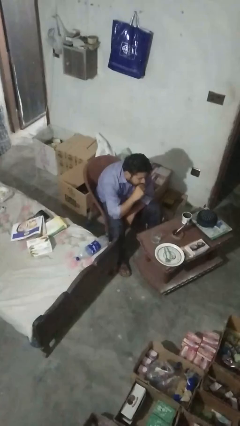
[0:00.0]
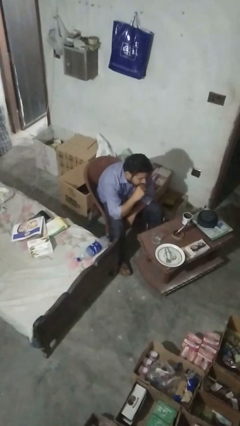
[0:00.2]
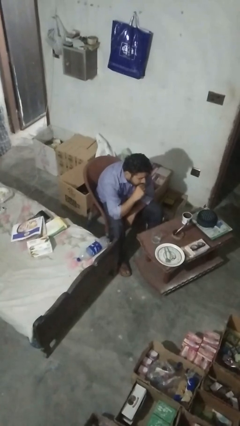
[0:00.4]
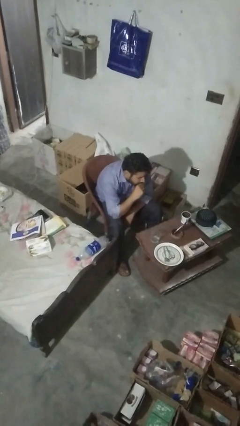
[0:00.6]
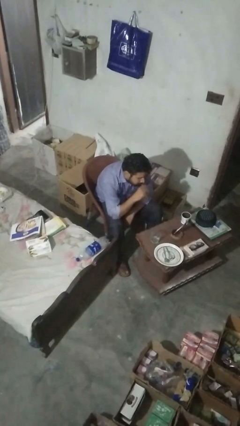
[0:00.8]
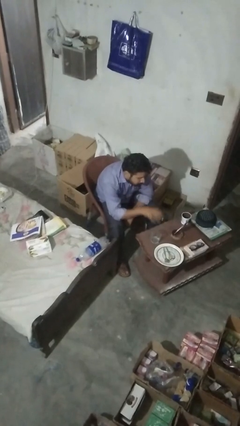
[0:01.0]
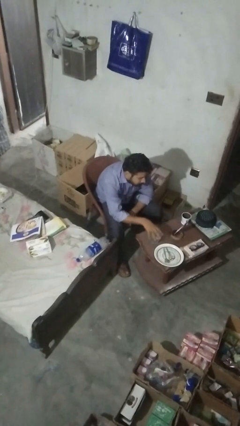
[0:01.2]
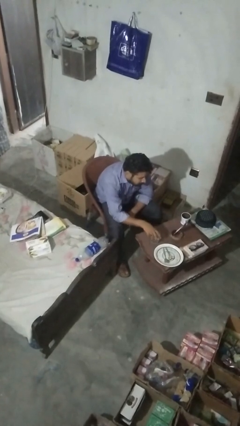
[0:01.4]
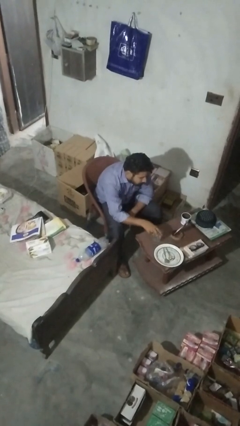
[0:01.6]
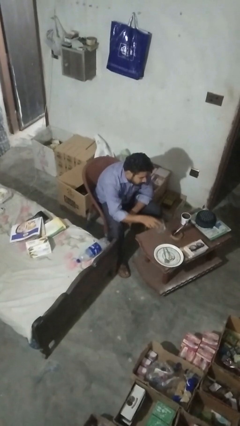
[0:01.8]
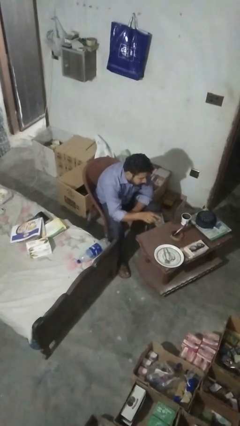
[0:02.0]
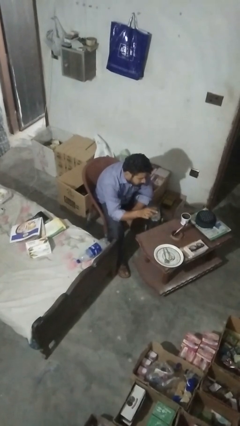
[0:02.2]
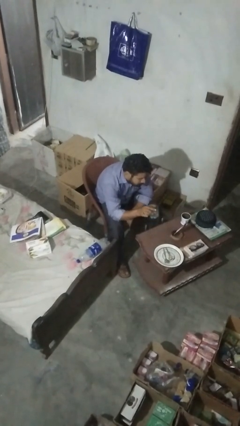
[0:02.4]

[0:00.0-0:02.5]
person picks up object from table

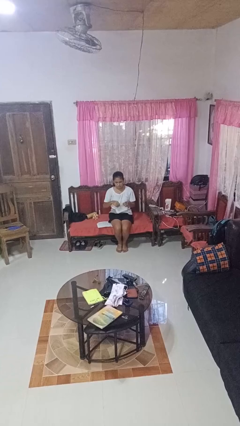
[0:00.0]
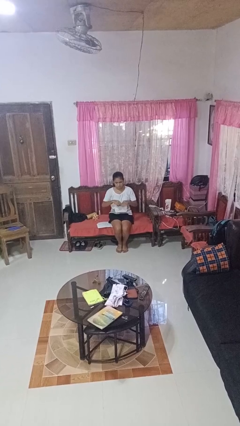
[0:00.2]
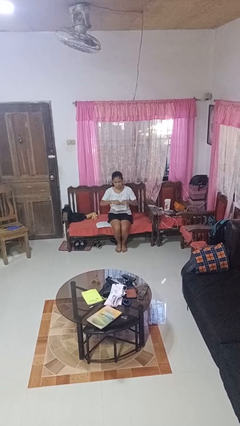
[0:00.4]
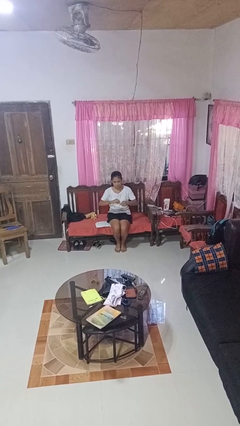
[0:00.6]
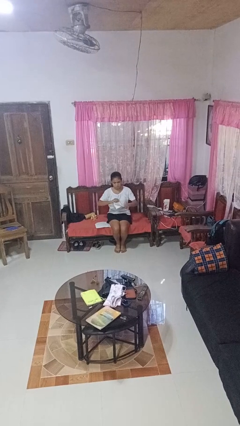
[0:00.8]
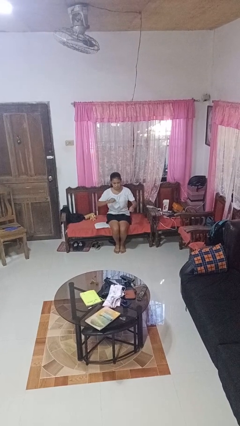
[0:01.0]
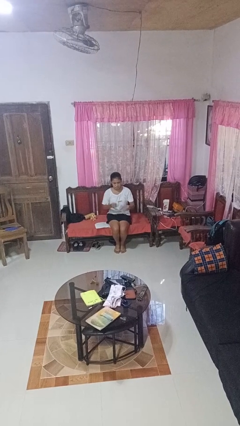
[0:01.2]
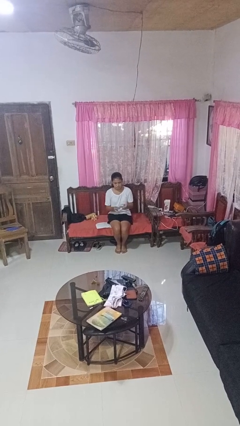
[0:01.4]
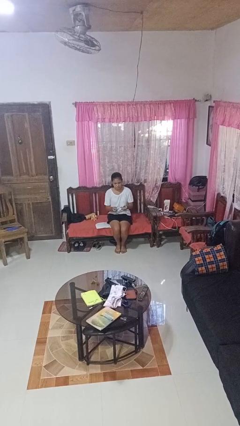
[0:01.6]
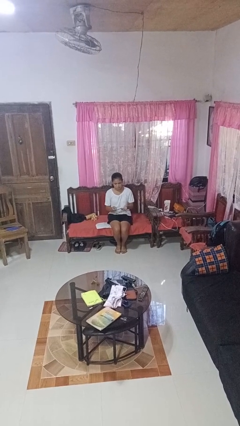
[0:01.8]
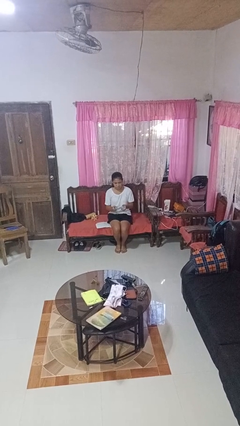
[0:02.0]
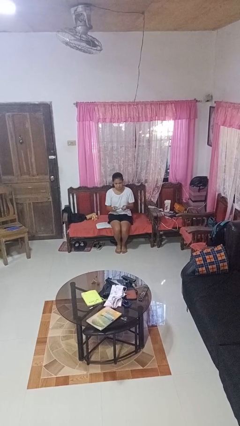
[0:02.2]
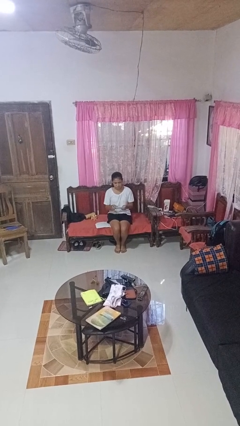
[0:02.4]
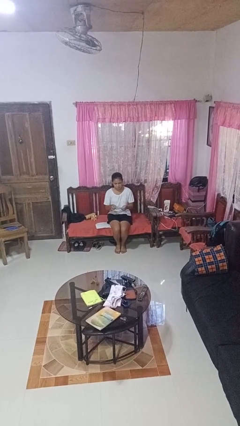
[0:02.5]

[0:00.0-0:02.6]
person tears paper

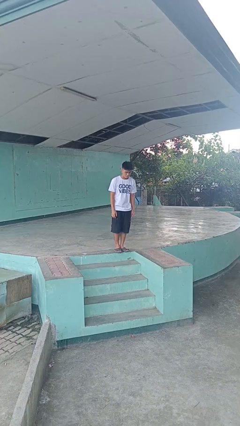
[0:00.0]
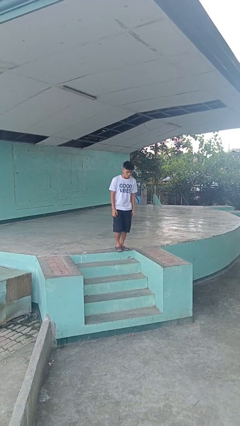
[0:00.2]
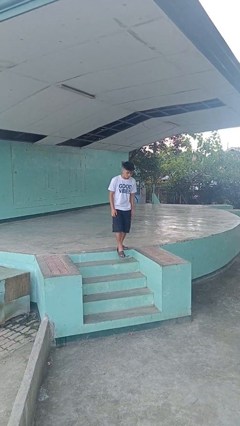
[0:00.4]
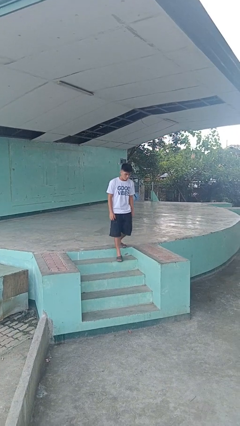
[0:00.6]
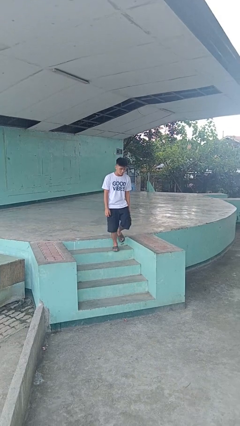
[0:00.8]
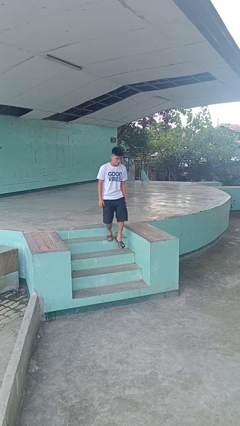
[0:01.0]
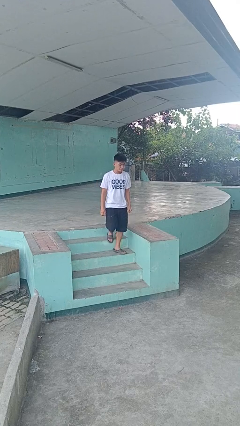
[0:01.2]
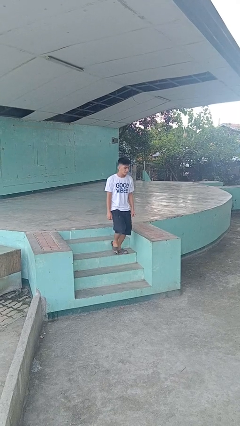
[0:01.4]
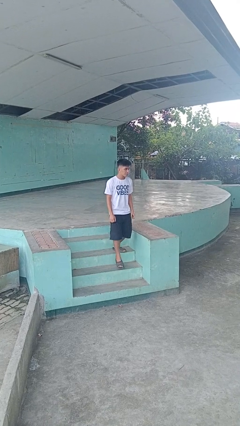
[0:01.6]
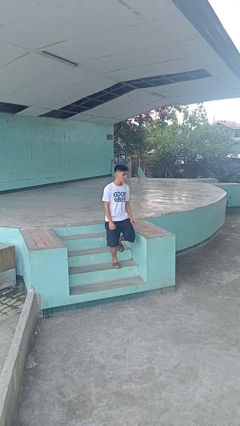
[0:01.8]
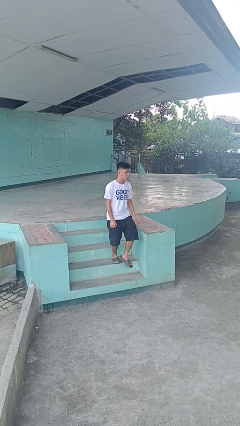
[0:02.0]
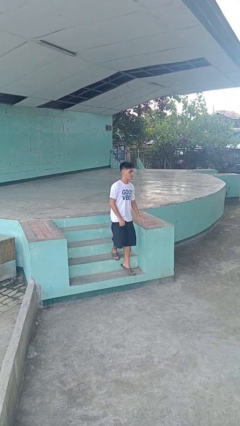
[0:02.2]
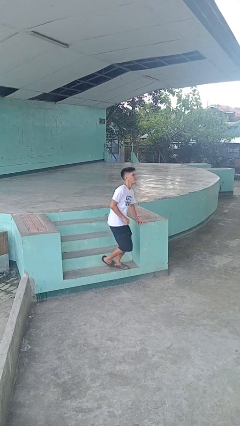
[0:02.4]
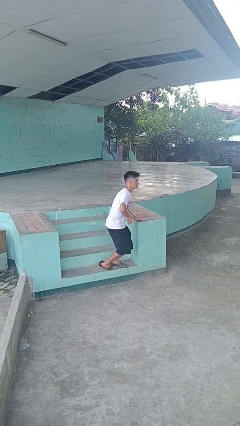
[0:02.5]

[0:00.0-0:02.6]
person climbs down stairs

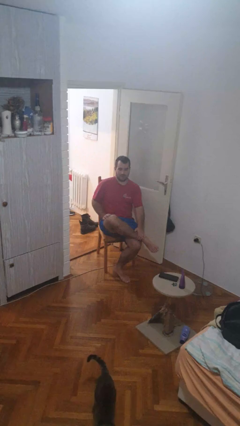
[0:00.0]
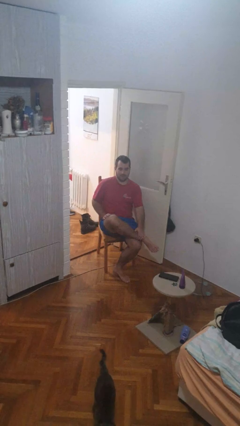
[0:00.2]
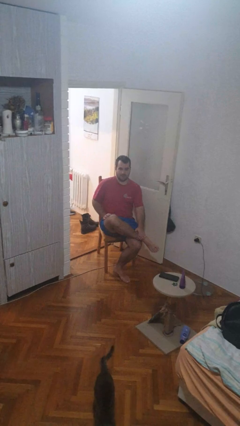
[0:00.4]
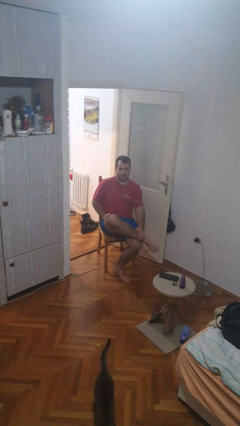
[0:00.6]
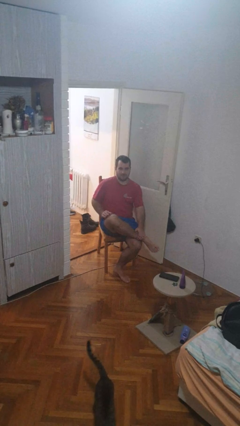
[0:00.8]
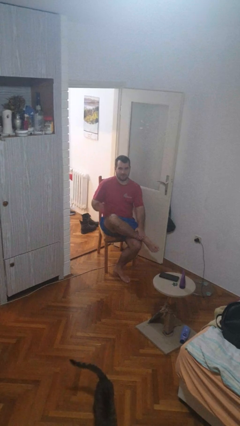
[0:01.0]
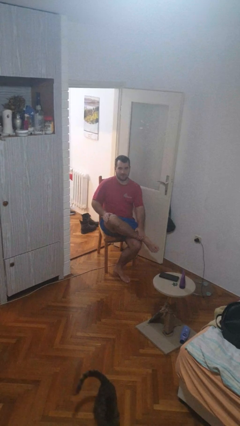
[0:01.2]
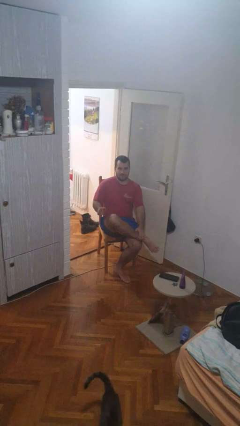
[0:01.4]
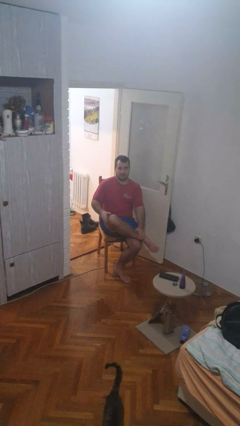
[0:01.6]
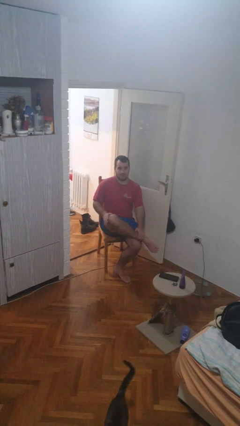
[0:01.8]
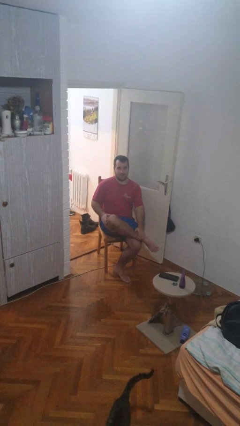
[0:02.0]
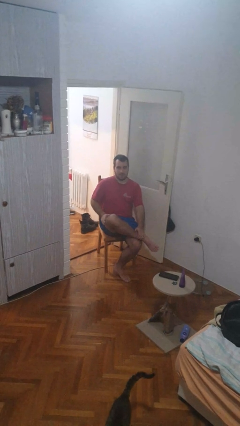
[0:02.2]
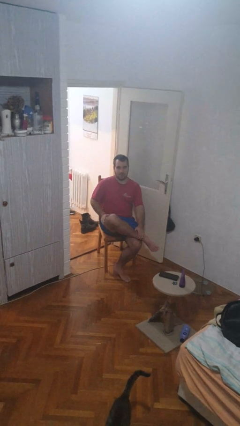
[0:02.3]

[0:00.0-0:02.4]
person slaps hands on thighs

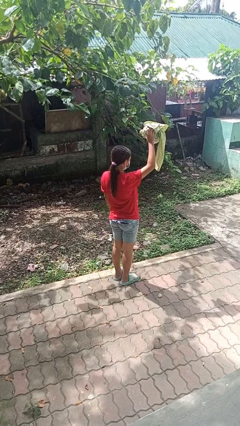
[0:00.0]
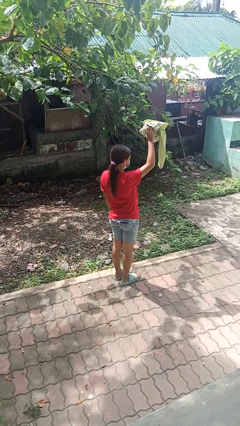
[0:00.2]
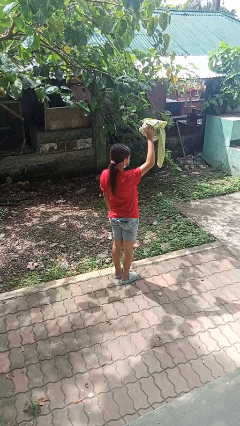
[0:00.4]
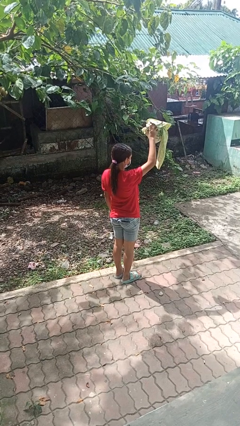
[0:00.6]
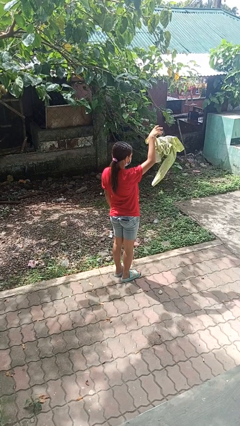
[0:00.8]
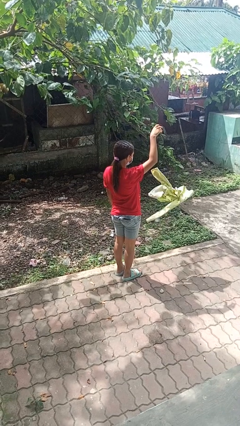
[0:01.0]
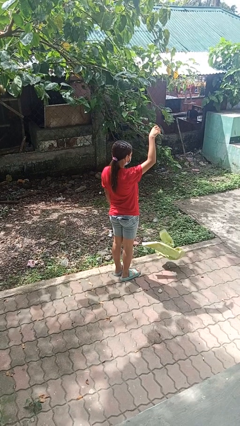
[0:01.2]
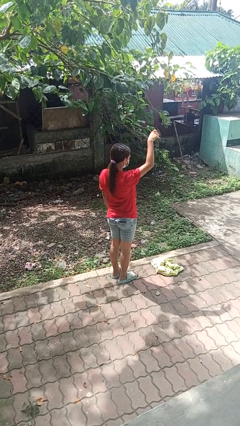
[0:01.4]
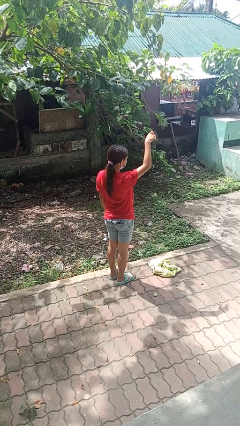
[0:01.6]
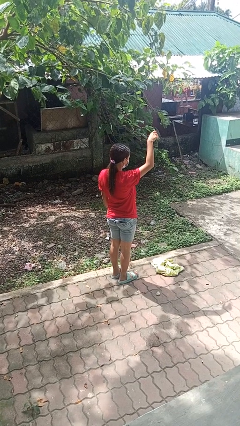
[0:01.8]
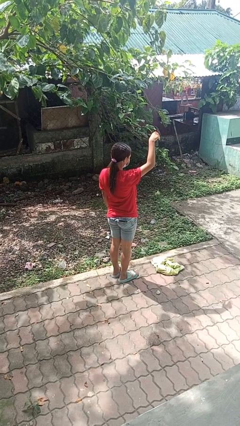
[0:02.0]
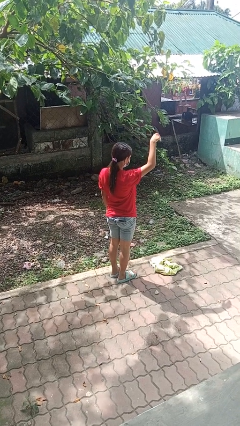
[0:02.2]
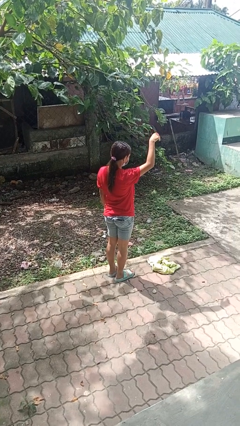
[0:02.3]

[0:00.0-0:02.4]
person drops object

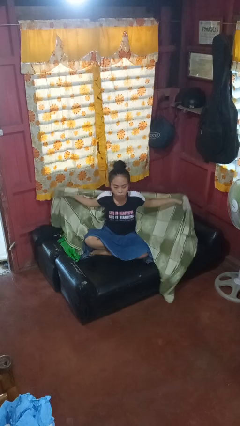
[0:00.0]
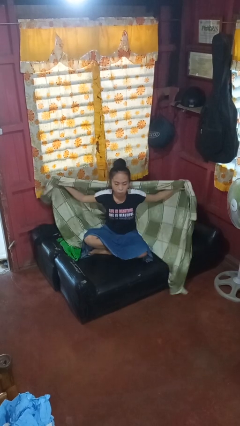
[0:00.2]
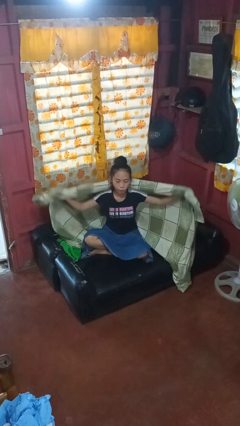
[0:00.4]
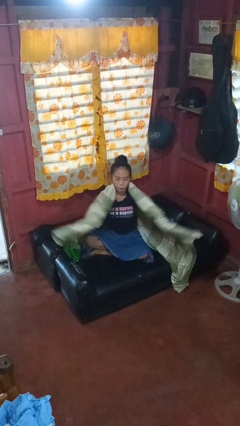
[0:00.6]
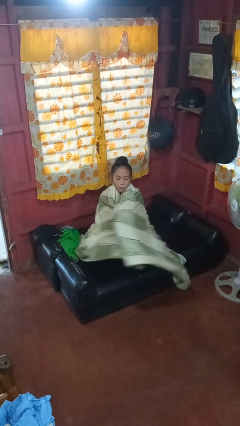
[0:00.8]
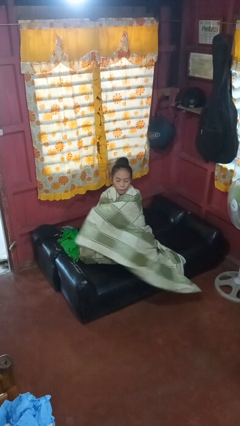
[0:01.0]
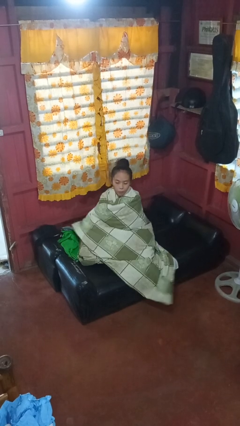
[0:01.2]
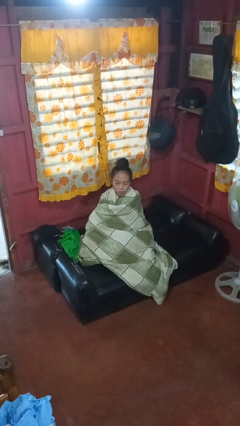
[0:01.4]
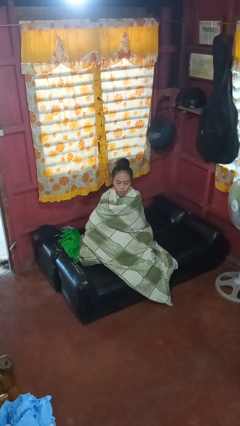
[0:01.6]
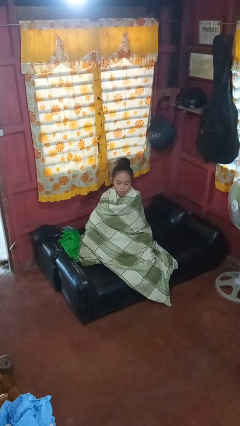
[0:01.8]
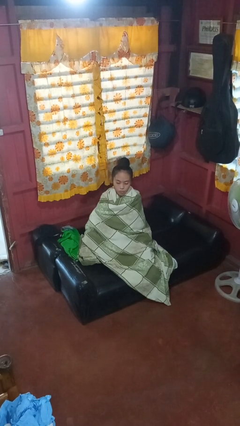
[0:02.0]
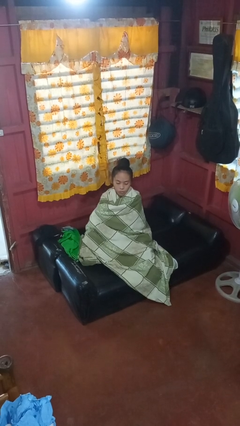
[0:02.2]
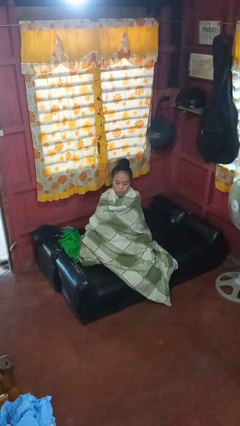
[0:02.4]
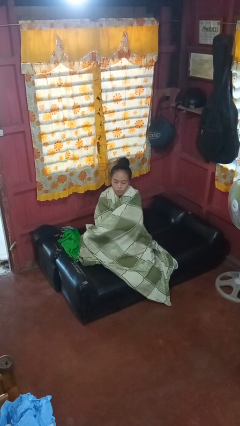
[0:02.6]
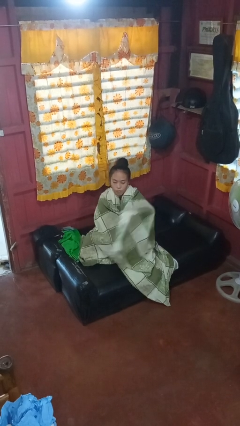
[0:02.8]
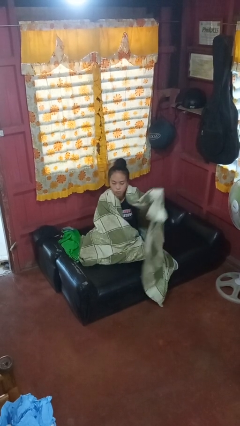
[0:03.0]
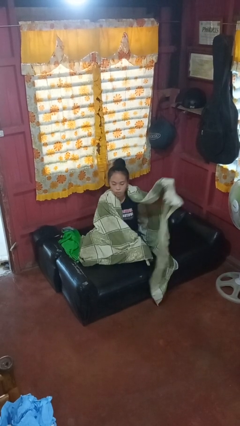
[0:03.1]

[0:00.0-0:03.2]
person covers with blanket

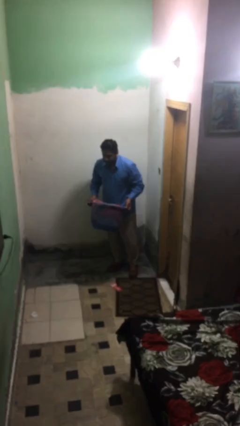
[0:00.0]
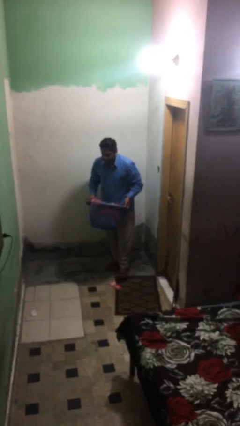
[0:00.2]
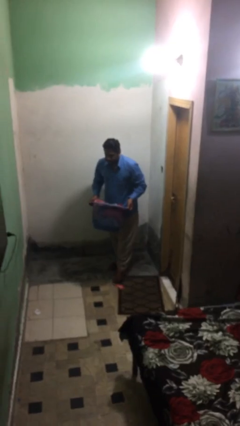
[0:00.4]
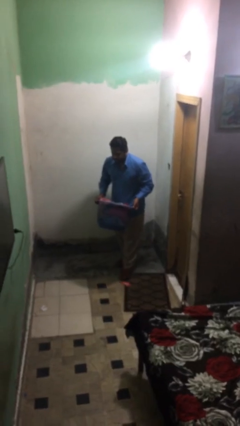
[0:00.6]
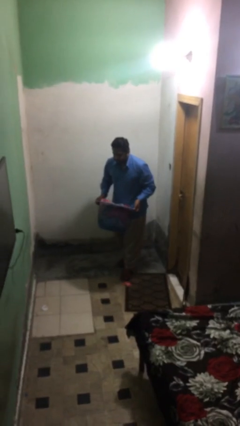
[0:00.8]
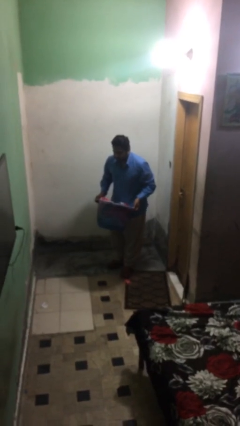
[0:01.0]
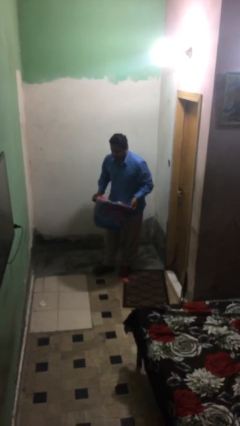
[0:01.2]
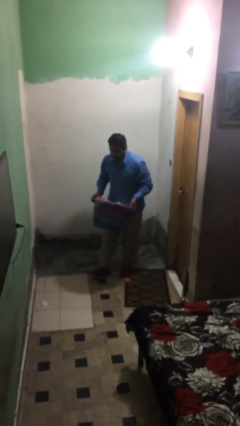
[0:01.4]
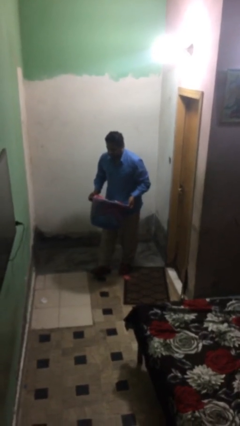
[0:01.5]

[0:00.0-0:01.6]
person carries heavy object
